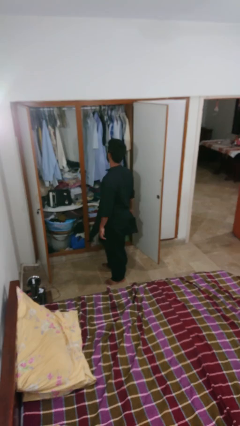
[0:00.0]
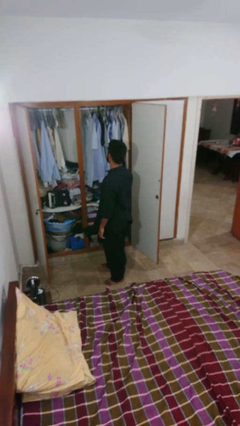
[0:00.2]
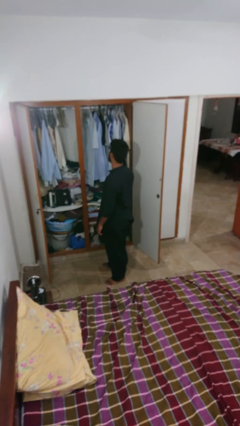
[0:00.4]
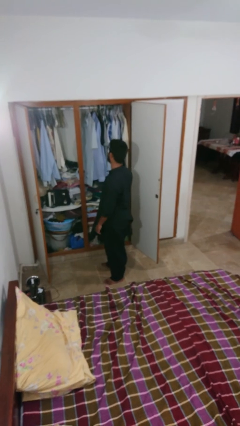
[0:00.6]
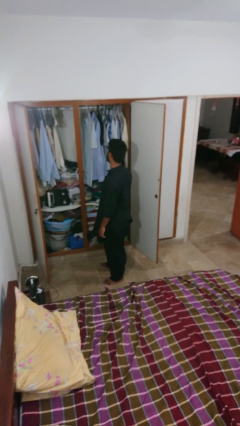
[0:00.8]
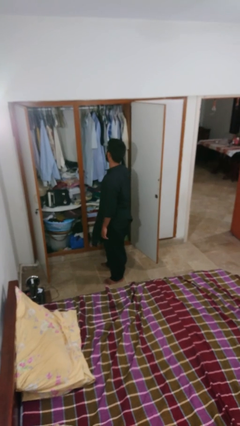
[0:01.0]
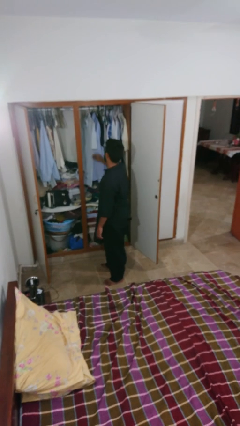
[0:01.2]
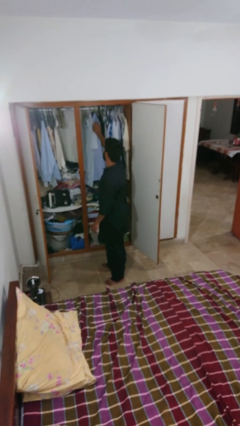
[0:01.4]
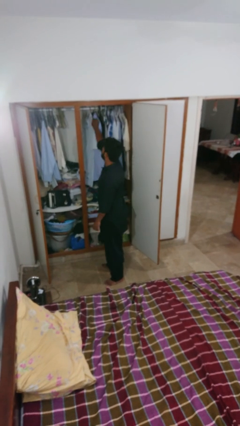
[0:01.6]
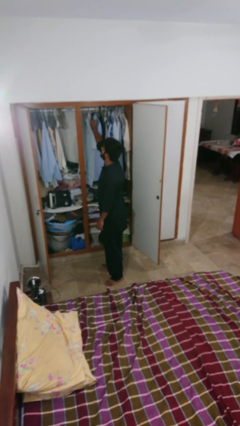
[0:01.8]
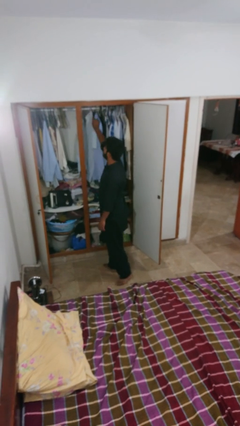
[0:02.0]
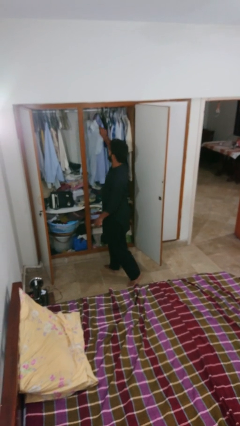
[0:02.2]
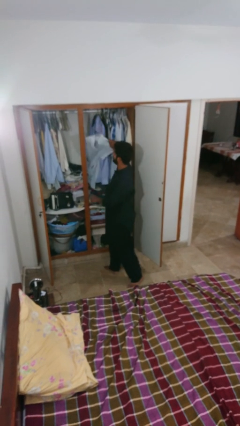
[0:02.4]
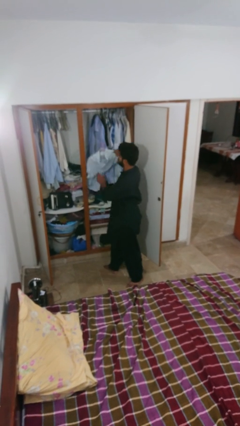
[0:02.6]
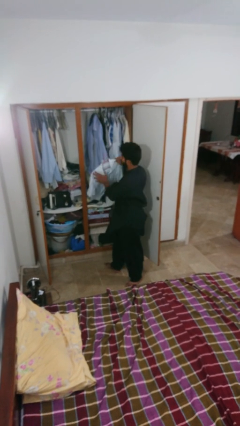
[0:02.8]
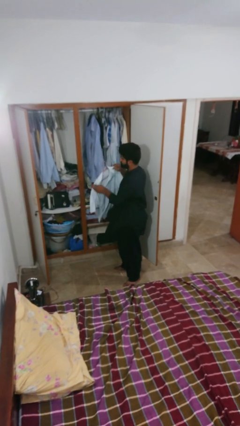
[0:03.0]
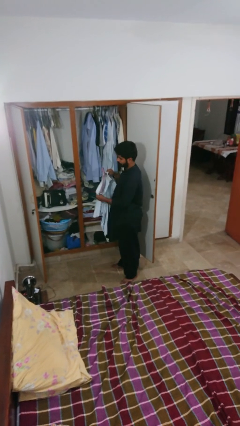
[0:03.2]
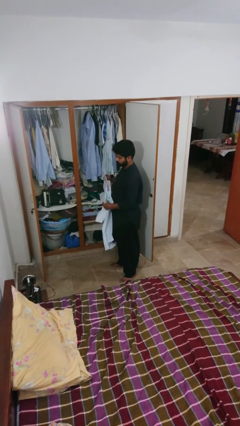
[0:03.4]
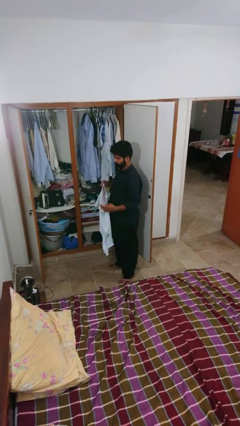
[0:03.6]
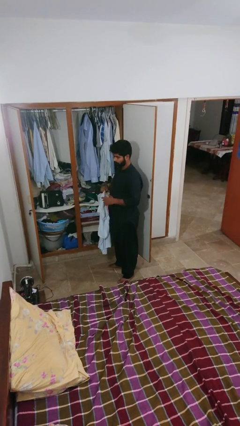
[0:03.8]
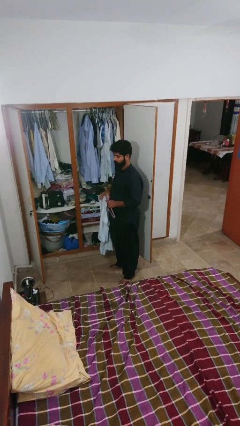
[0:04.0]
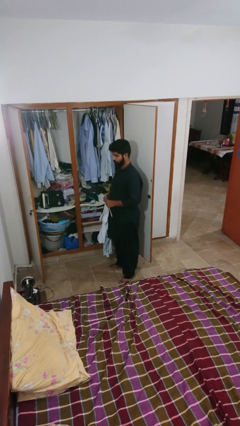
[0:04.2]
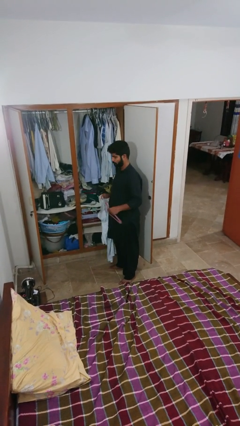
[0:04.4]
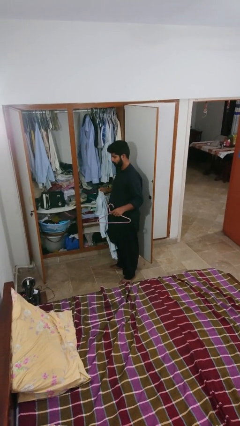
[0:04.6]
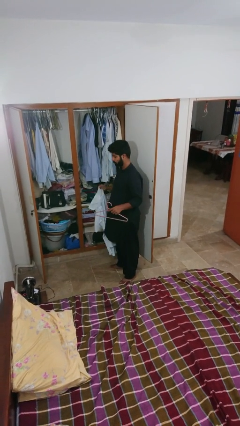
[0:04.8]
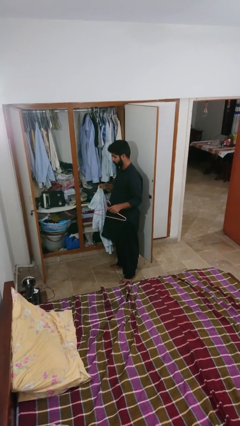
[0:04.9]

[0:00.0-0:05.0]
person takes clothes from closet

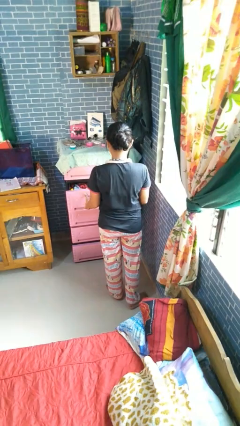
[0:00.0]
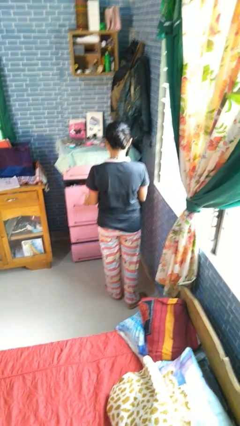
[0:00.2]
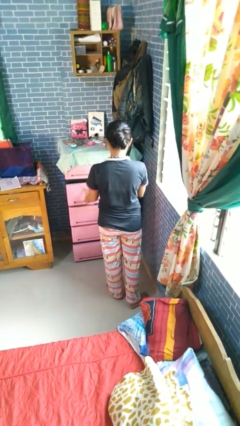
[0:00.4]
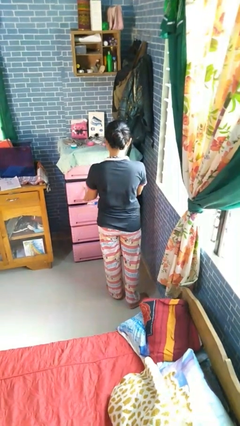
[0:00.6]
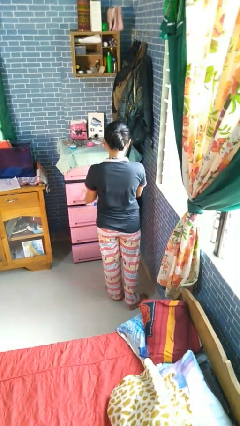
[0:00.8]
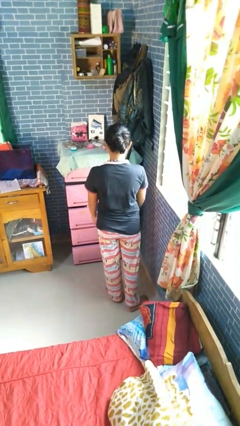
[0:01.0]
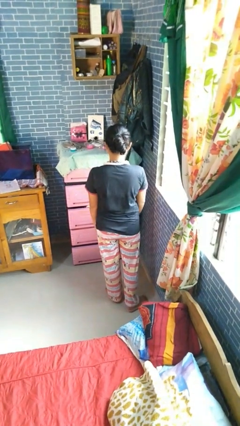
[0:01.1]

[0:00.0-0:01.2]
person closes dresser drawer

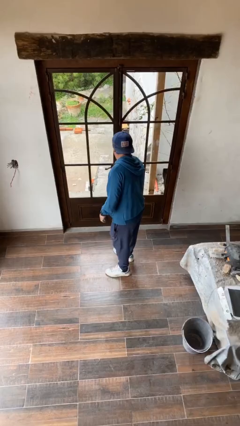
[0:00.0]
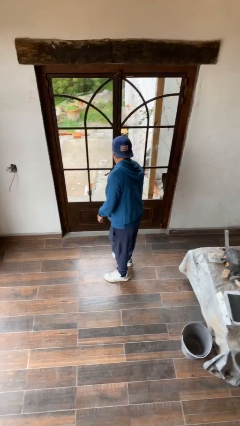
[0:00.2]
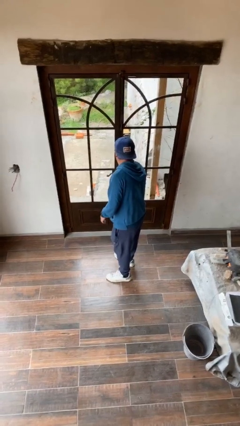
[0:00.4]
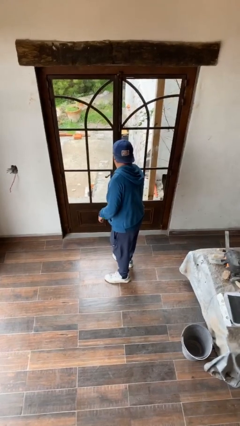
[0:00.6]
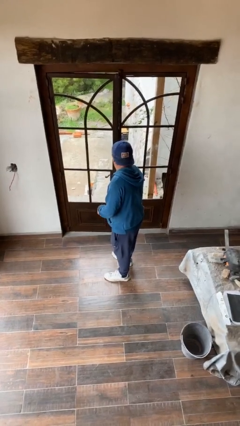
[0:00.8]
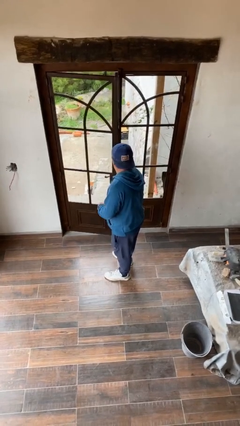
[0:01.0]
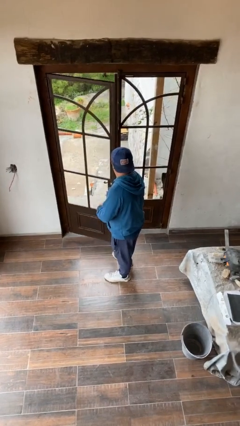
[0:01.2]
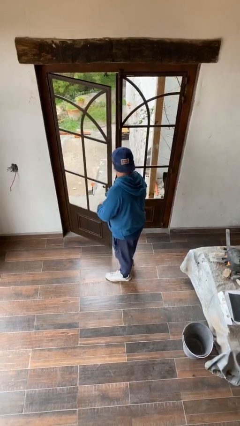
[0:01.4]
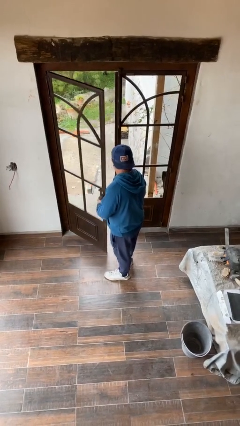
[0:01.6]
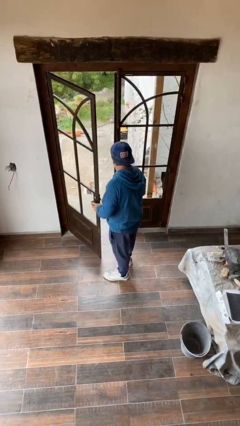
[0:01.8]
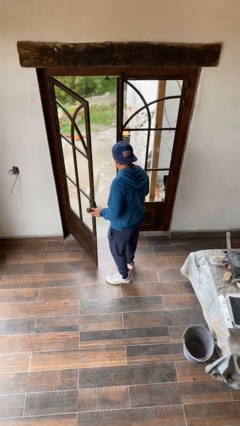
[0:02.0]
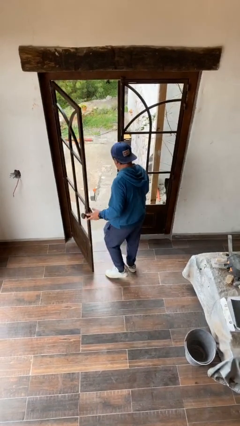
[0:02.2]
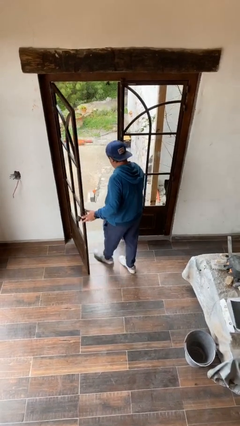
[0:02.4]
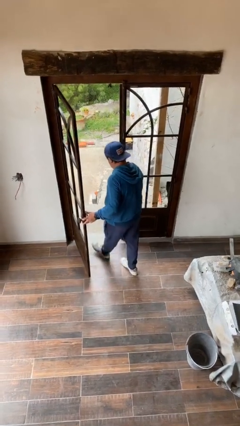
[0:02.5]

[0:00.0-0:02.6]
person opens facility door

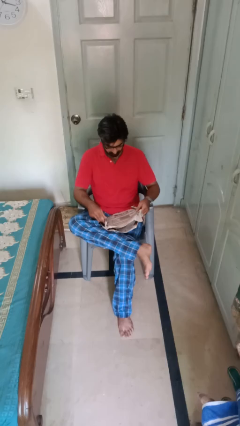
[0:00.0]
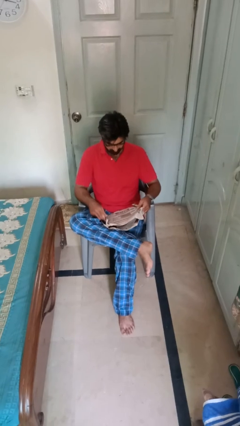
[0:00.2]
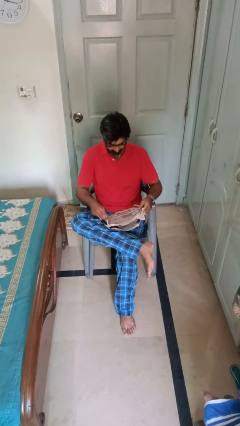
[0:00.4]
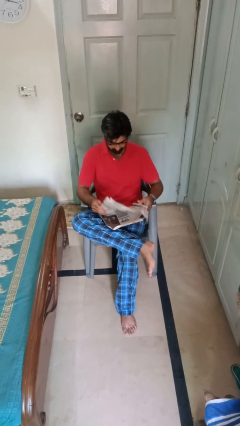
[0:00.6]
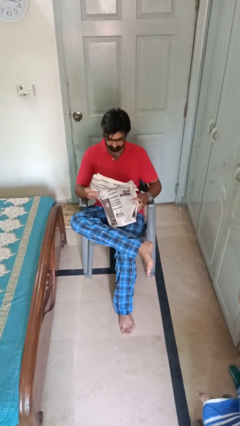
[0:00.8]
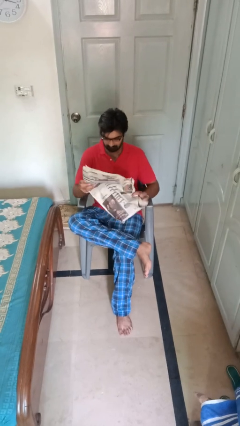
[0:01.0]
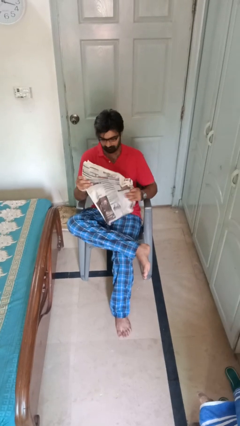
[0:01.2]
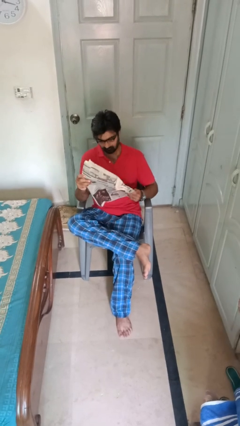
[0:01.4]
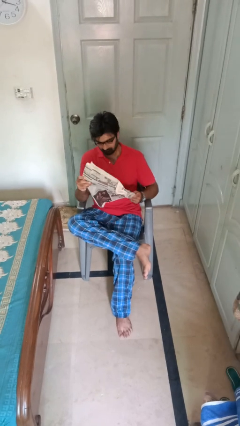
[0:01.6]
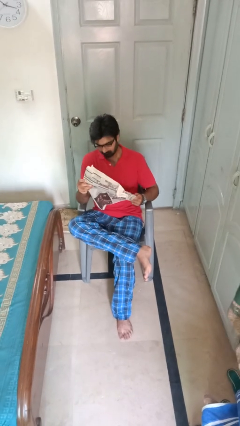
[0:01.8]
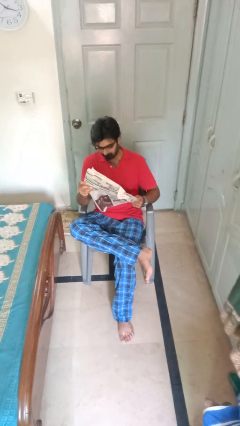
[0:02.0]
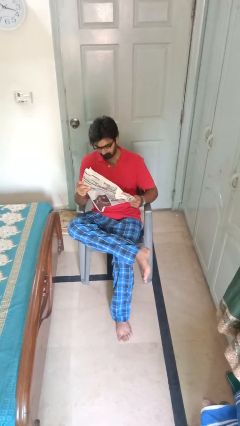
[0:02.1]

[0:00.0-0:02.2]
person reads newspaper

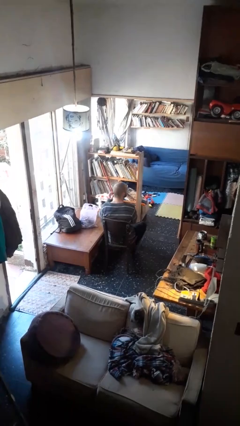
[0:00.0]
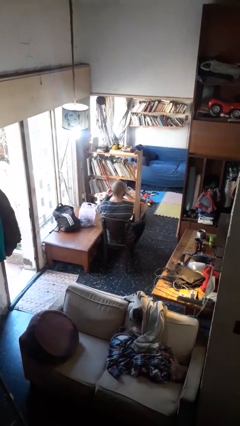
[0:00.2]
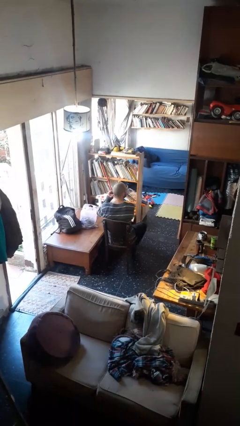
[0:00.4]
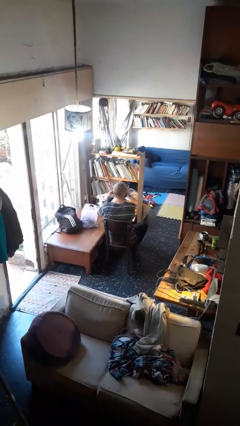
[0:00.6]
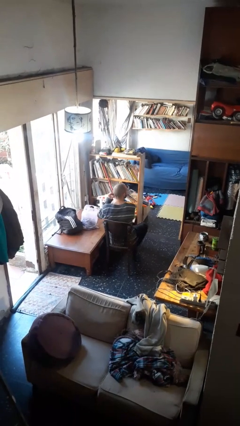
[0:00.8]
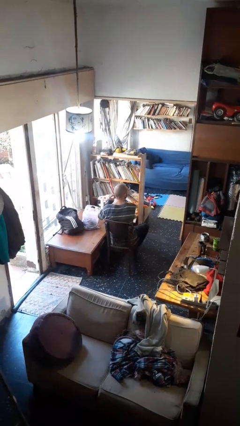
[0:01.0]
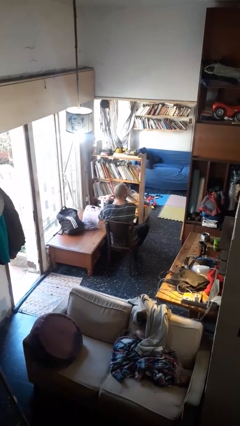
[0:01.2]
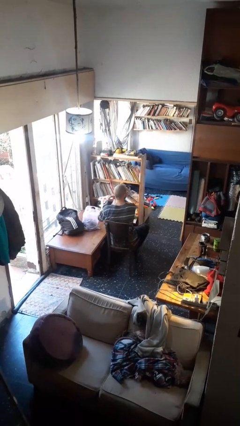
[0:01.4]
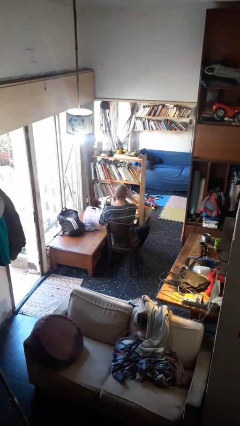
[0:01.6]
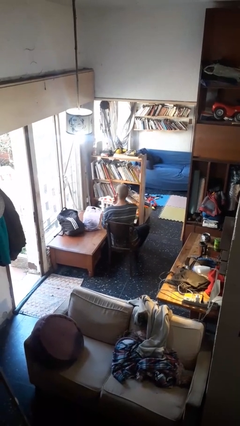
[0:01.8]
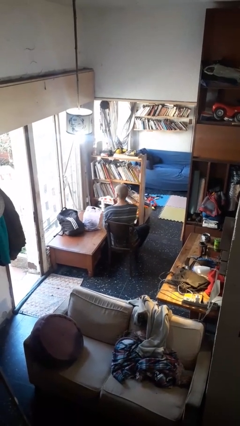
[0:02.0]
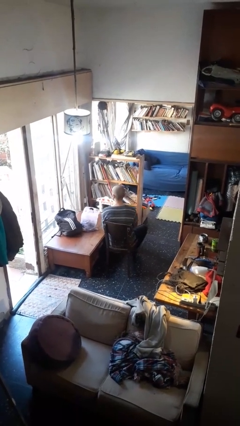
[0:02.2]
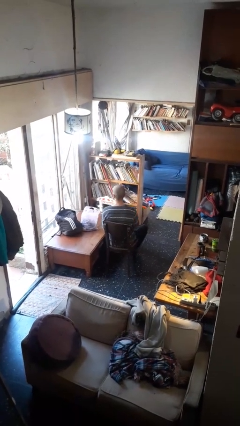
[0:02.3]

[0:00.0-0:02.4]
person puts on earrings

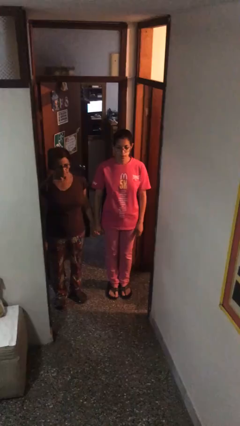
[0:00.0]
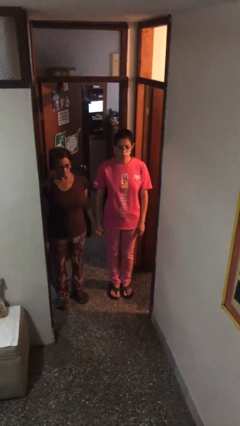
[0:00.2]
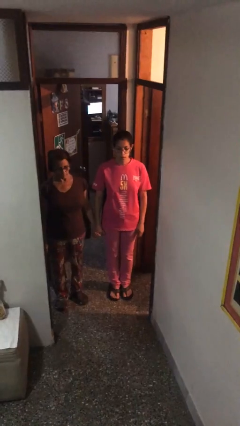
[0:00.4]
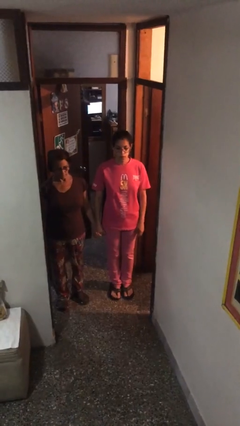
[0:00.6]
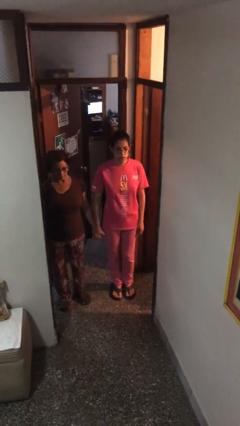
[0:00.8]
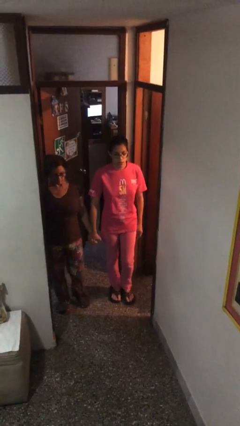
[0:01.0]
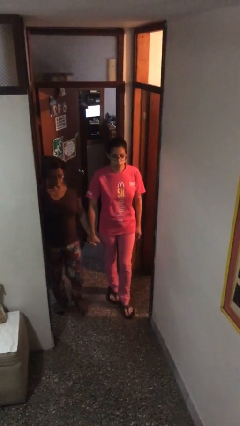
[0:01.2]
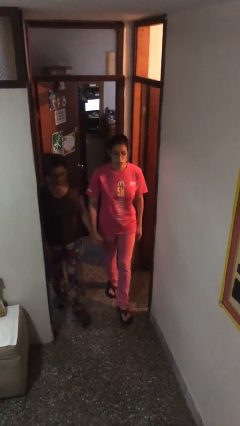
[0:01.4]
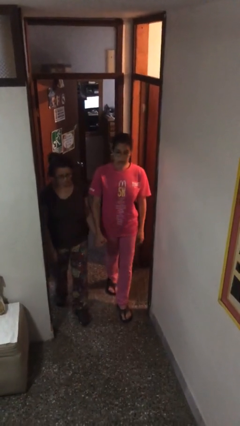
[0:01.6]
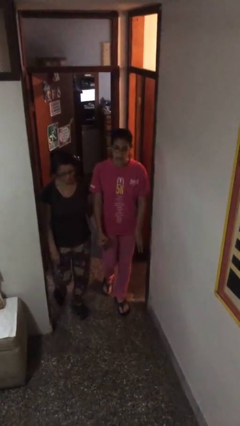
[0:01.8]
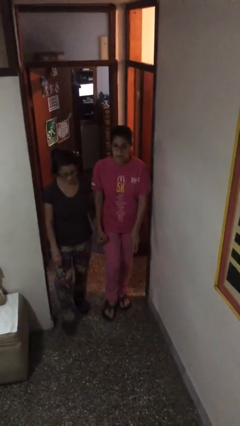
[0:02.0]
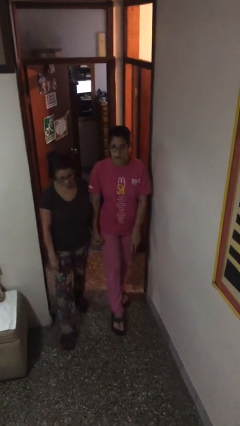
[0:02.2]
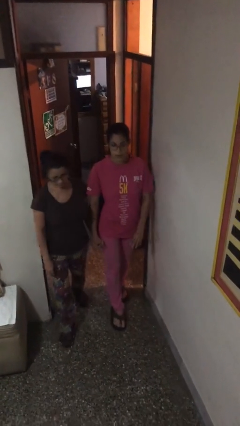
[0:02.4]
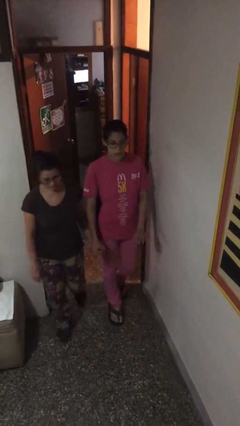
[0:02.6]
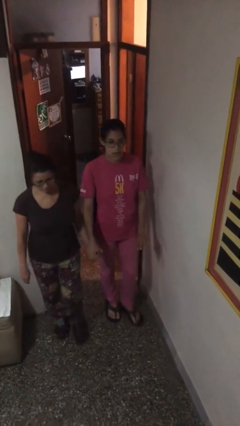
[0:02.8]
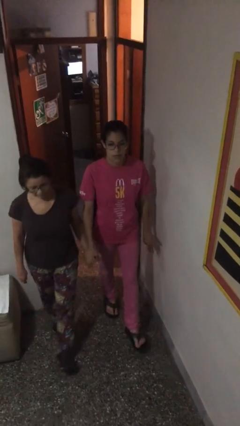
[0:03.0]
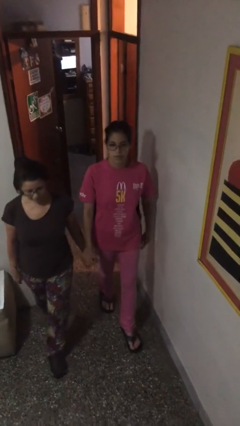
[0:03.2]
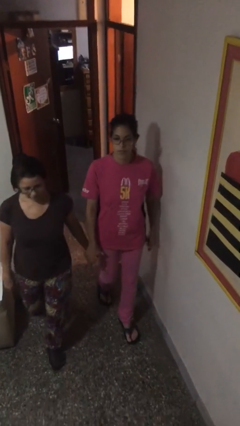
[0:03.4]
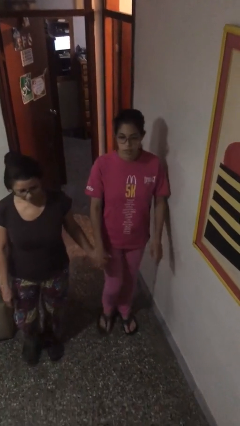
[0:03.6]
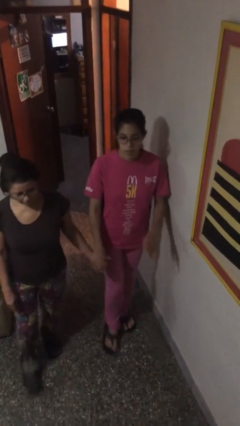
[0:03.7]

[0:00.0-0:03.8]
person holds hand

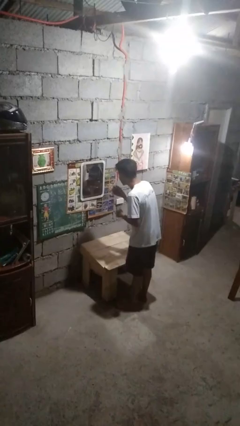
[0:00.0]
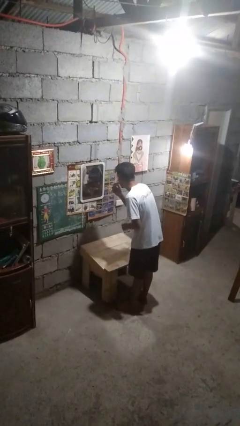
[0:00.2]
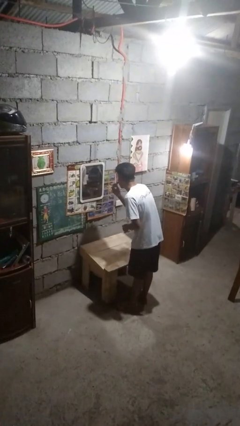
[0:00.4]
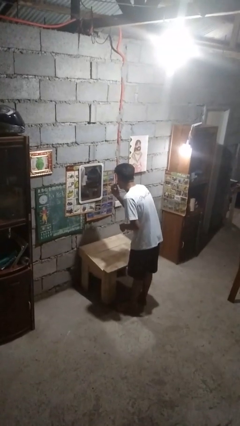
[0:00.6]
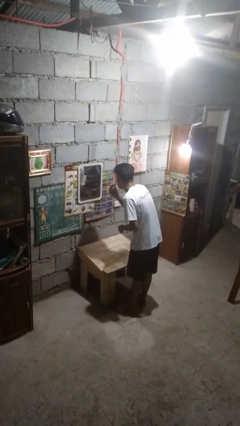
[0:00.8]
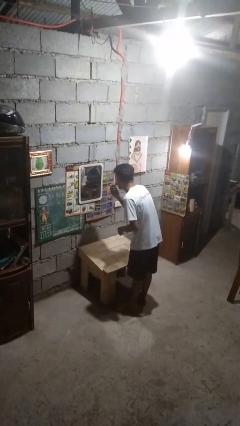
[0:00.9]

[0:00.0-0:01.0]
person applies foundation makeup
